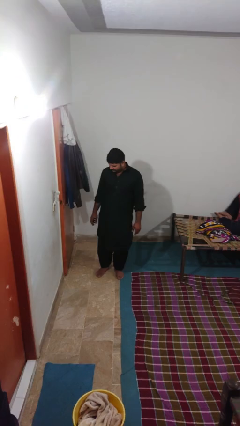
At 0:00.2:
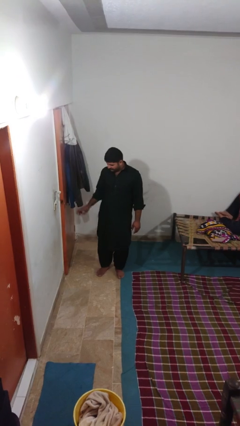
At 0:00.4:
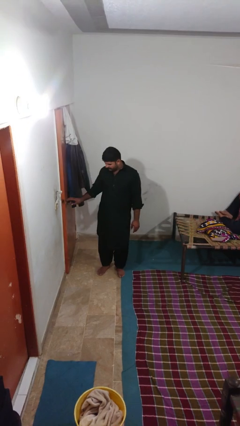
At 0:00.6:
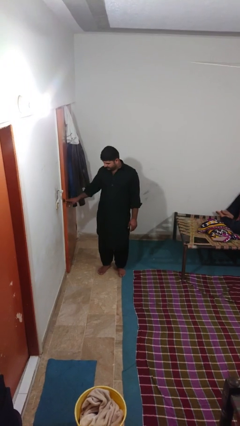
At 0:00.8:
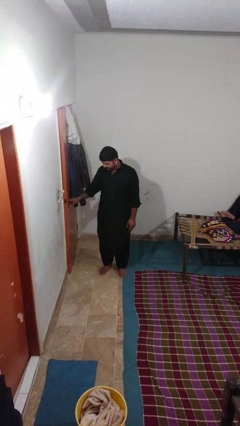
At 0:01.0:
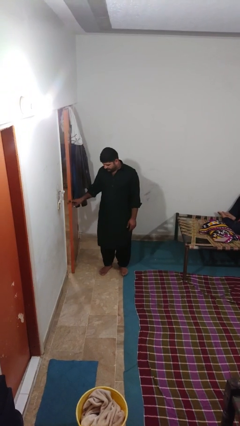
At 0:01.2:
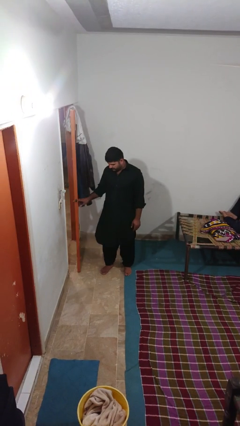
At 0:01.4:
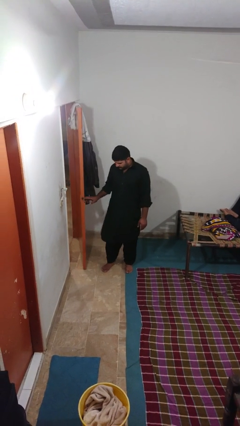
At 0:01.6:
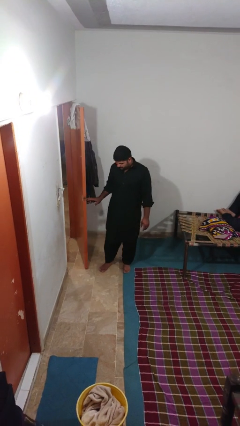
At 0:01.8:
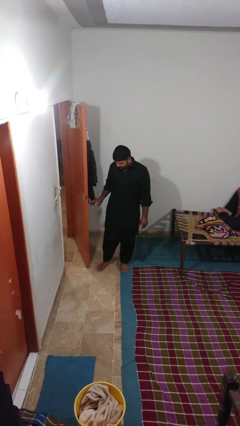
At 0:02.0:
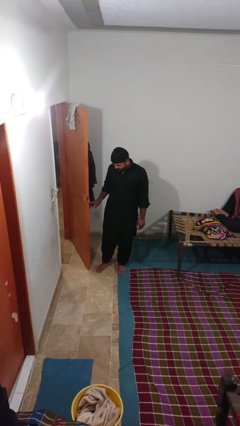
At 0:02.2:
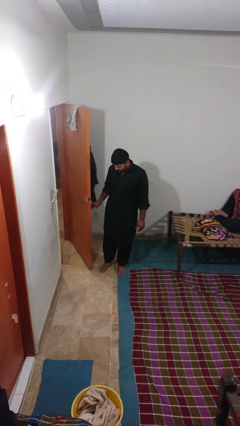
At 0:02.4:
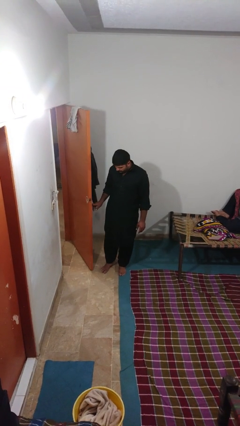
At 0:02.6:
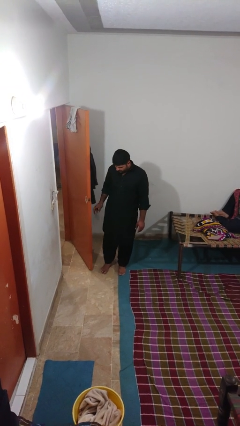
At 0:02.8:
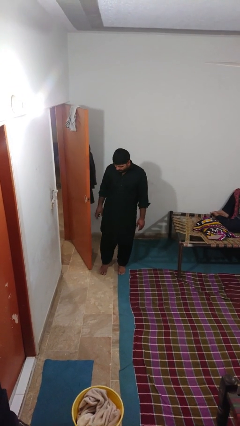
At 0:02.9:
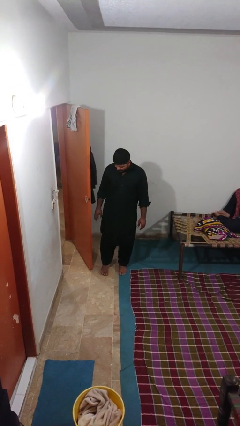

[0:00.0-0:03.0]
person opens facility door

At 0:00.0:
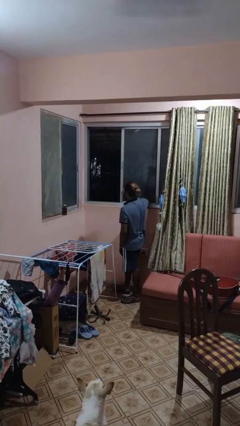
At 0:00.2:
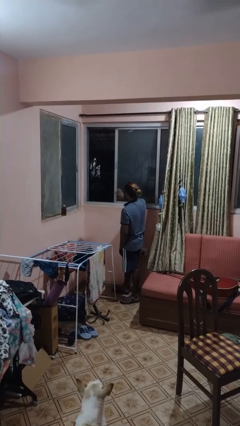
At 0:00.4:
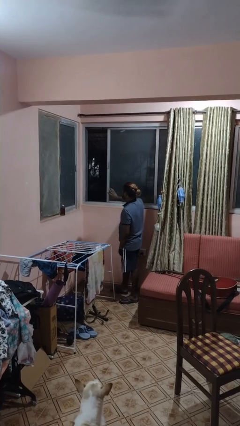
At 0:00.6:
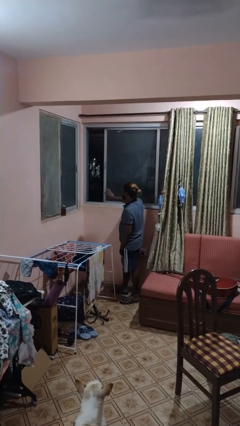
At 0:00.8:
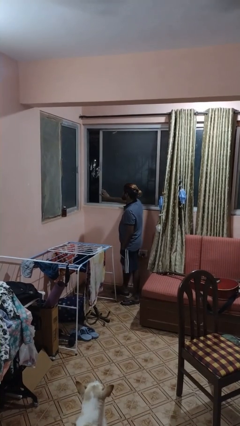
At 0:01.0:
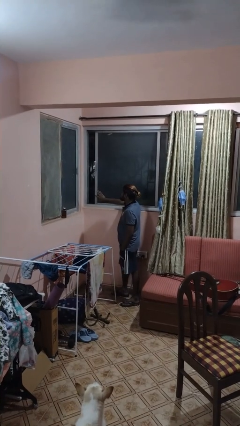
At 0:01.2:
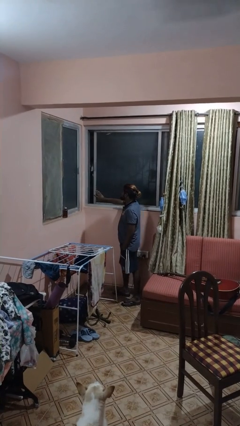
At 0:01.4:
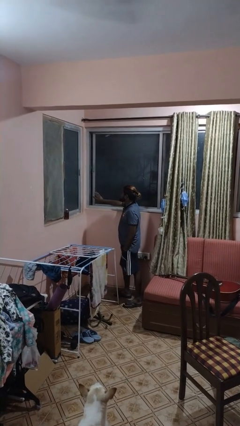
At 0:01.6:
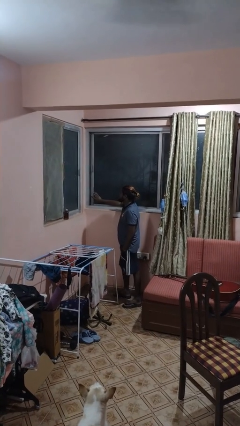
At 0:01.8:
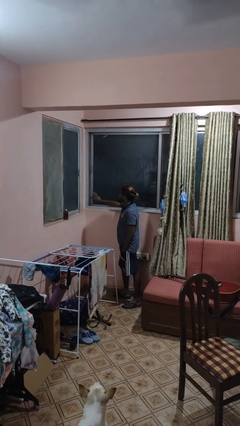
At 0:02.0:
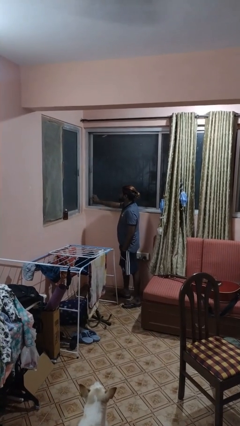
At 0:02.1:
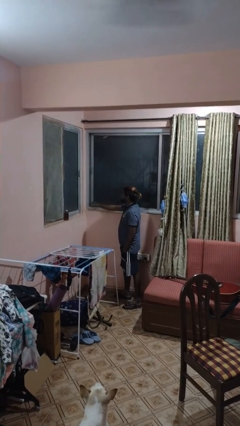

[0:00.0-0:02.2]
person closes sliding door

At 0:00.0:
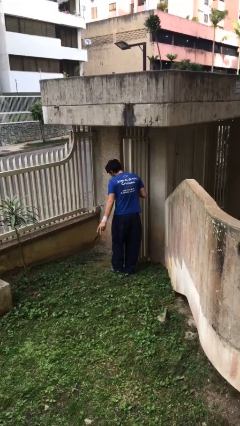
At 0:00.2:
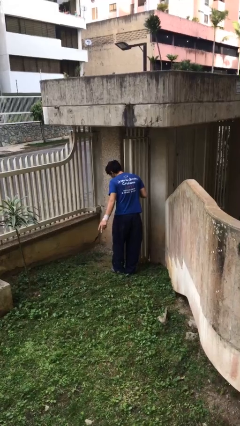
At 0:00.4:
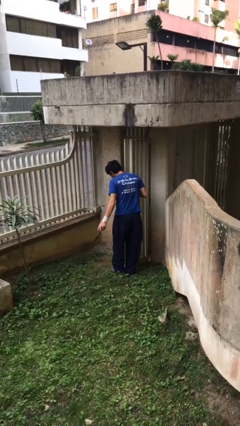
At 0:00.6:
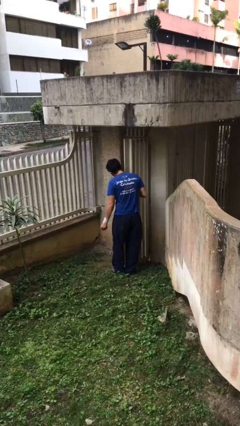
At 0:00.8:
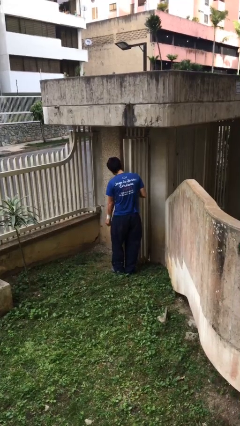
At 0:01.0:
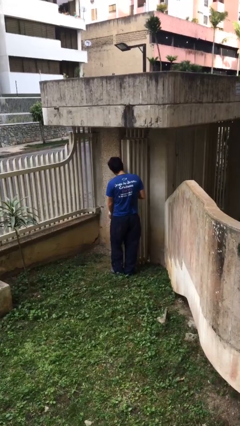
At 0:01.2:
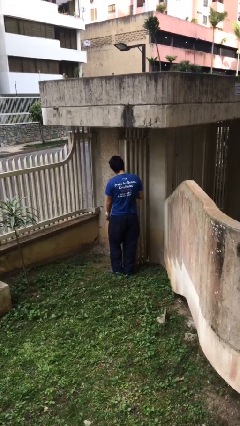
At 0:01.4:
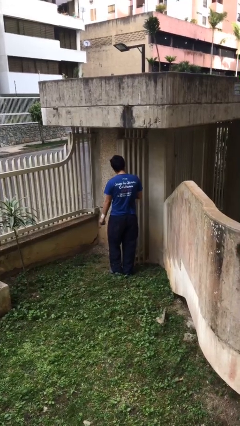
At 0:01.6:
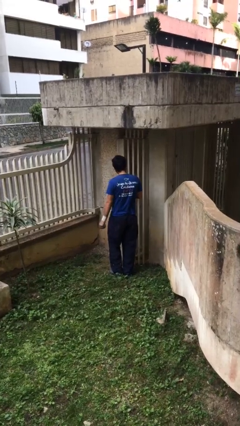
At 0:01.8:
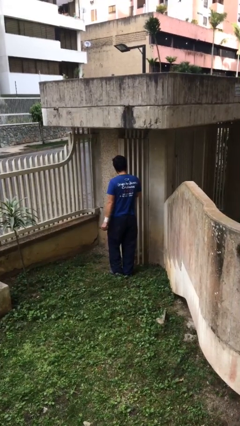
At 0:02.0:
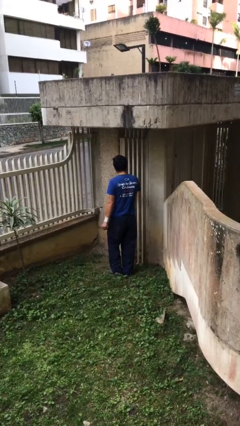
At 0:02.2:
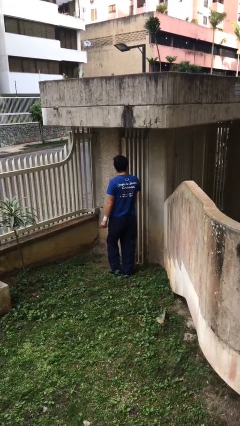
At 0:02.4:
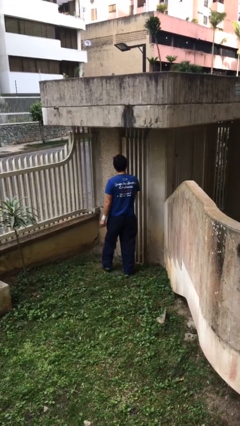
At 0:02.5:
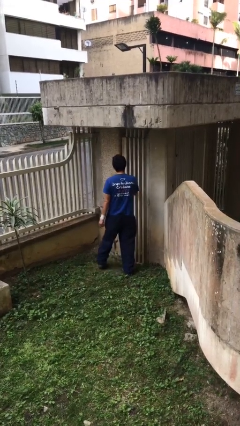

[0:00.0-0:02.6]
person closes facility door

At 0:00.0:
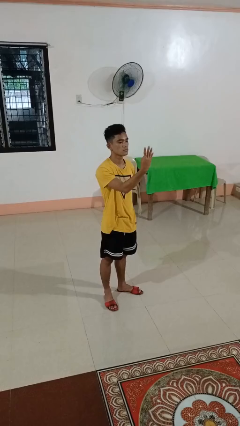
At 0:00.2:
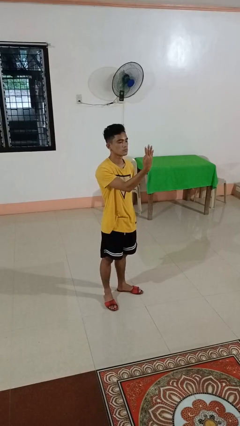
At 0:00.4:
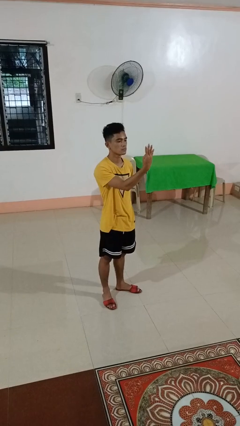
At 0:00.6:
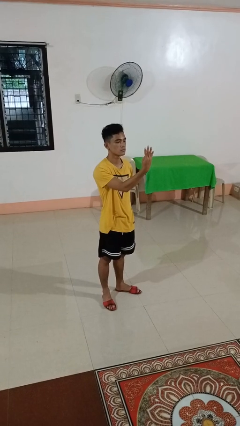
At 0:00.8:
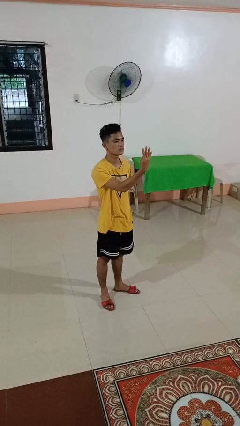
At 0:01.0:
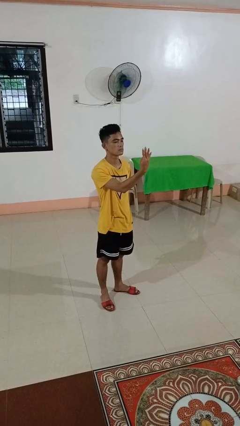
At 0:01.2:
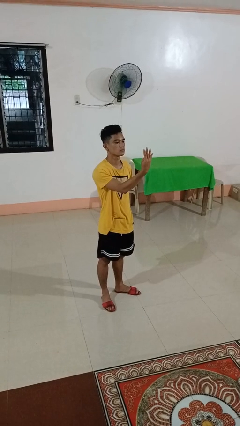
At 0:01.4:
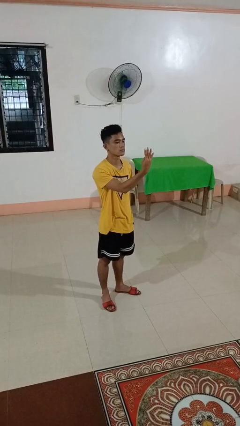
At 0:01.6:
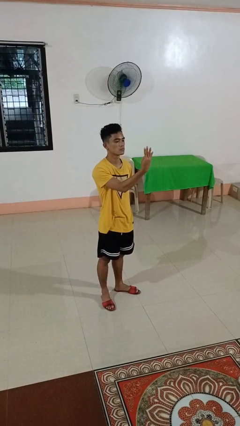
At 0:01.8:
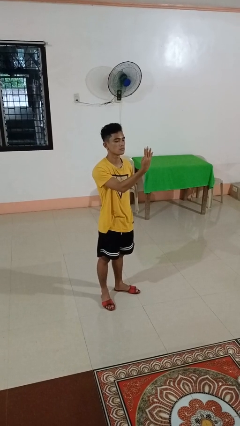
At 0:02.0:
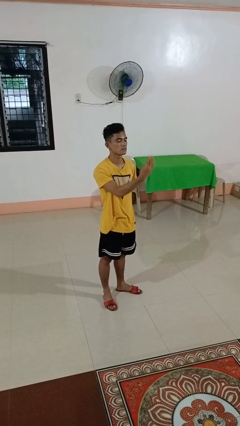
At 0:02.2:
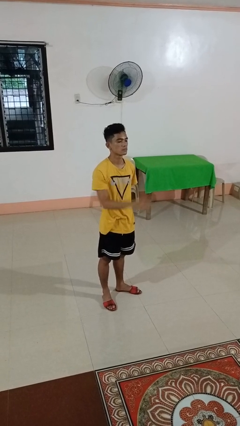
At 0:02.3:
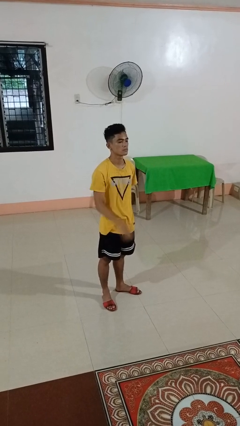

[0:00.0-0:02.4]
person gestures number four

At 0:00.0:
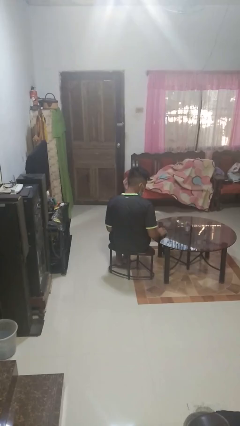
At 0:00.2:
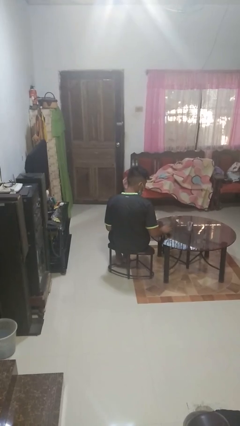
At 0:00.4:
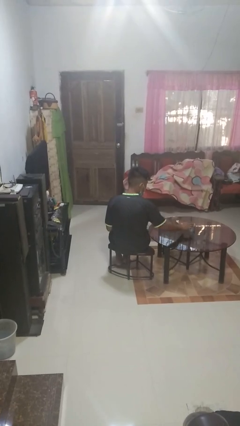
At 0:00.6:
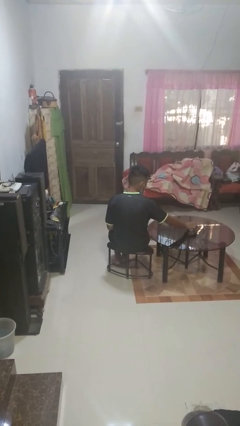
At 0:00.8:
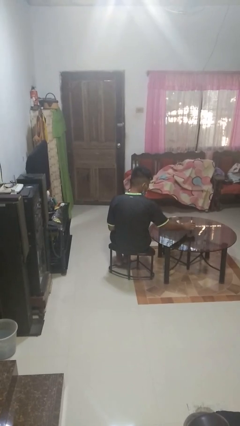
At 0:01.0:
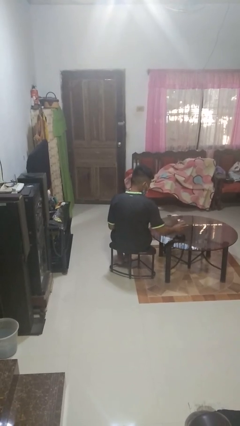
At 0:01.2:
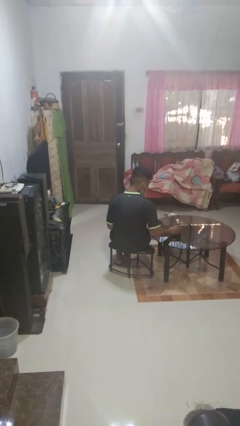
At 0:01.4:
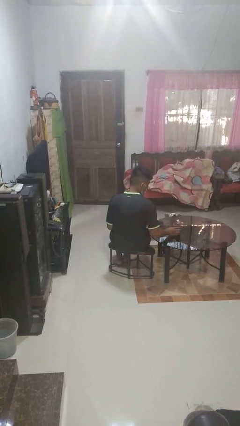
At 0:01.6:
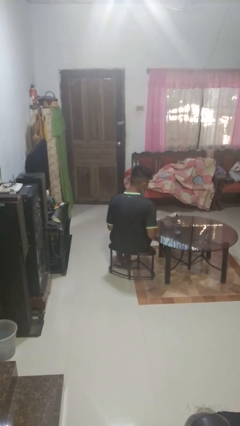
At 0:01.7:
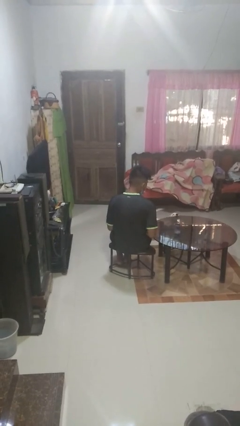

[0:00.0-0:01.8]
person sets upright glass

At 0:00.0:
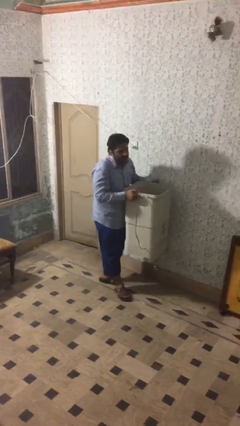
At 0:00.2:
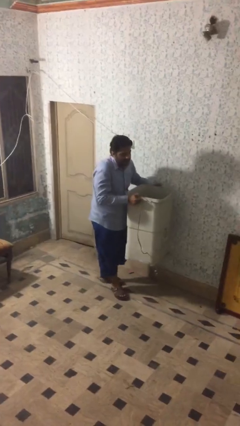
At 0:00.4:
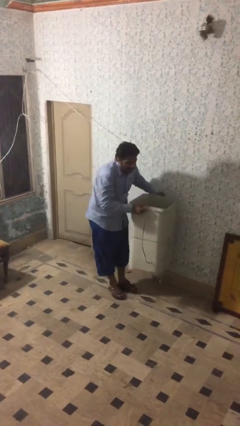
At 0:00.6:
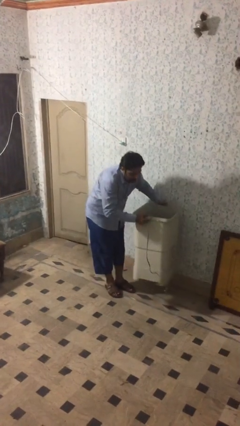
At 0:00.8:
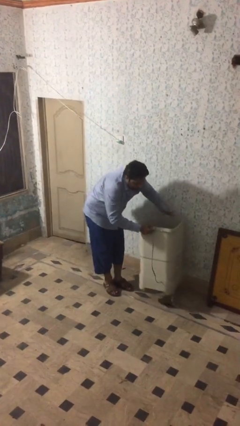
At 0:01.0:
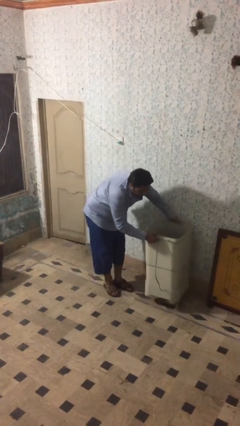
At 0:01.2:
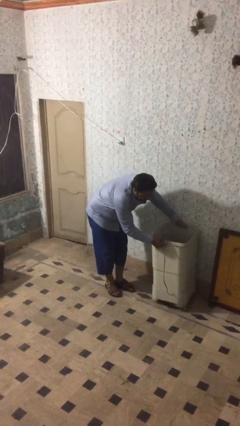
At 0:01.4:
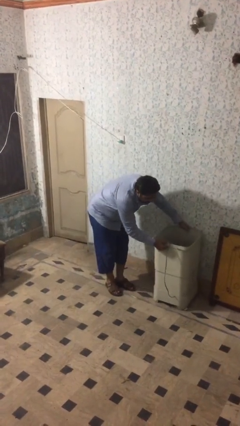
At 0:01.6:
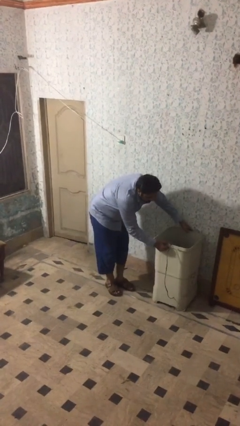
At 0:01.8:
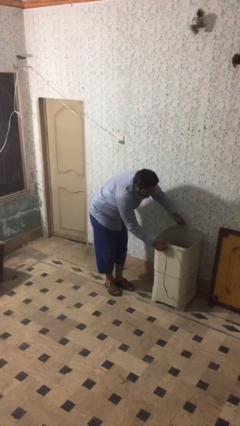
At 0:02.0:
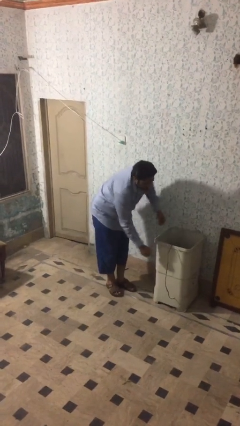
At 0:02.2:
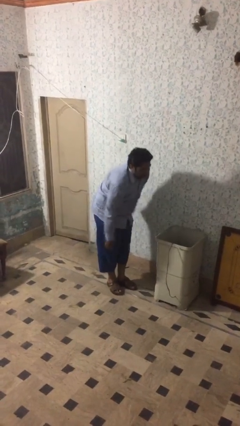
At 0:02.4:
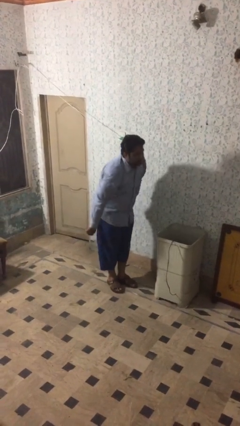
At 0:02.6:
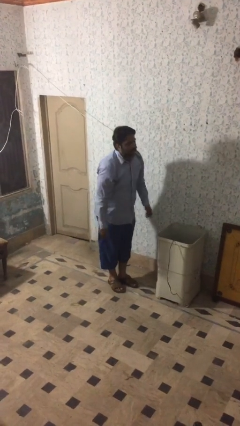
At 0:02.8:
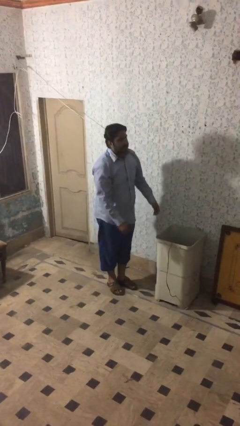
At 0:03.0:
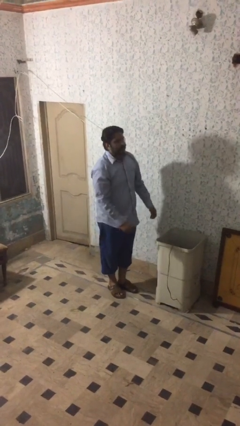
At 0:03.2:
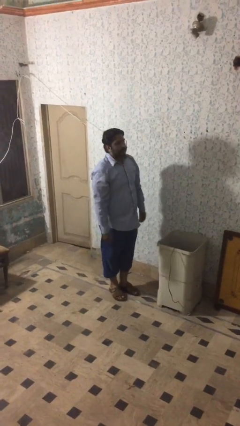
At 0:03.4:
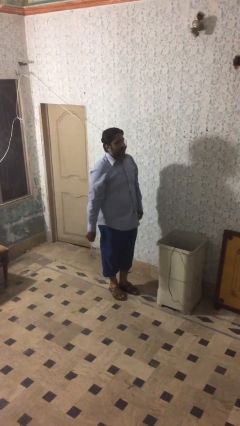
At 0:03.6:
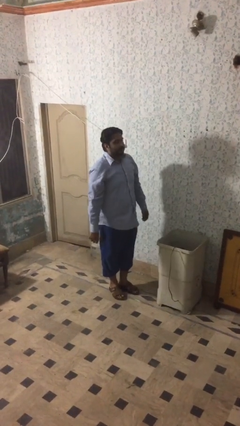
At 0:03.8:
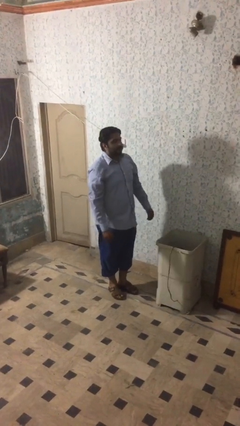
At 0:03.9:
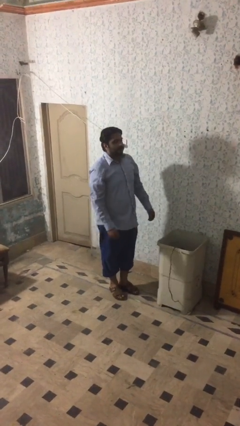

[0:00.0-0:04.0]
person puts down object on floor

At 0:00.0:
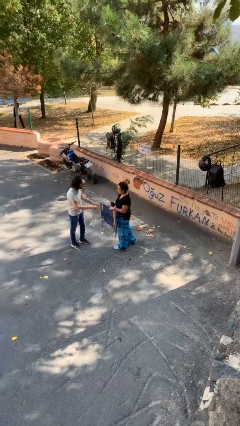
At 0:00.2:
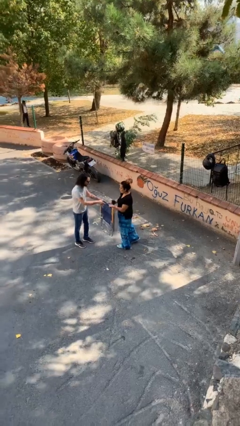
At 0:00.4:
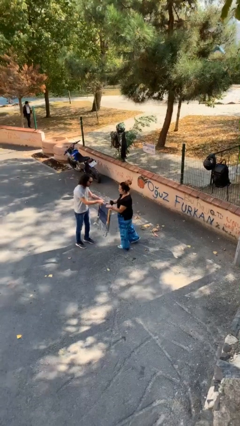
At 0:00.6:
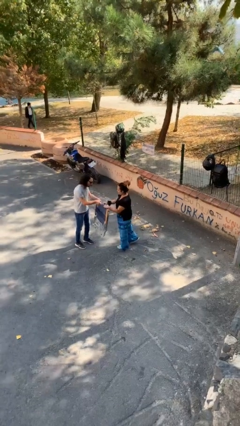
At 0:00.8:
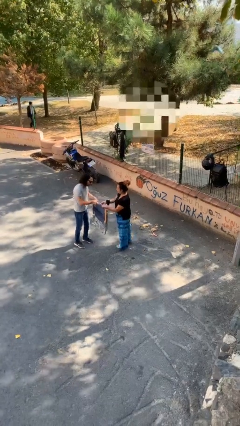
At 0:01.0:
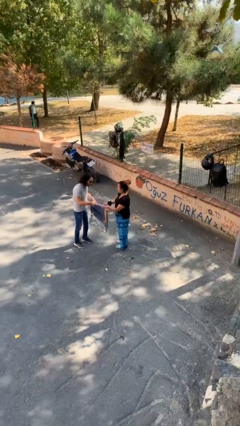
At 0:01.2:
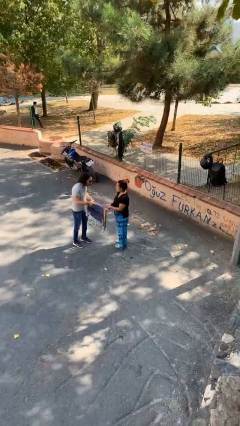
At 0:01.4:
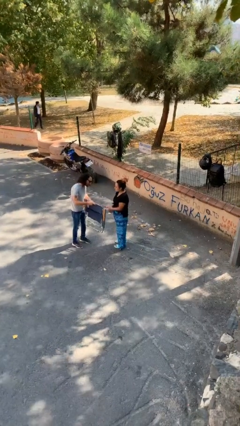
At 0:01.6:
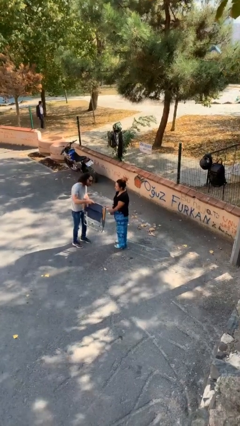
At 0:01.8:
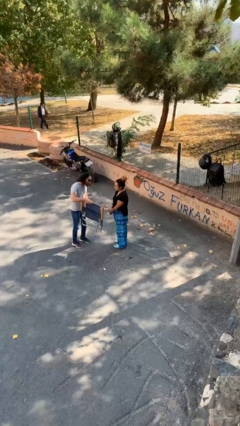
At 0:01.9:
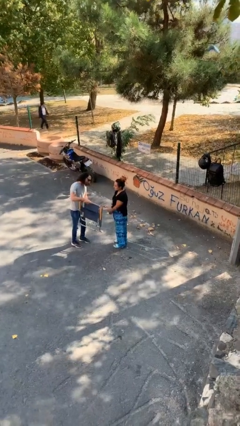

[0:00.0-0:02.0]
person transfers object to person
